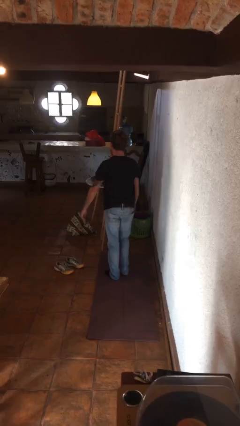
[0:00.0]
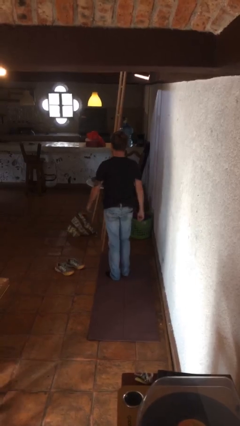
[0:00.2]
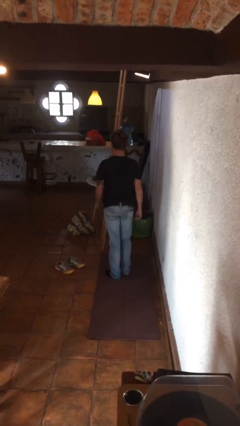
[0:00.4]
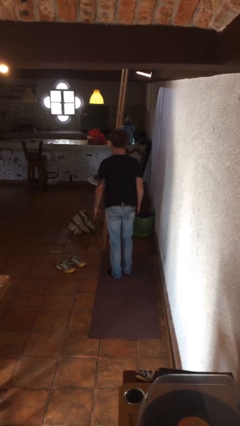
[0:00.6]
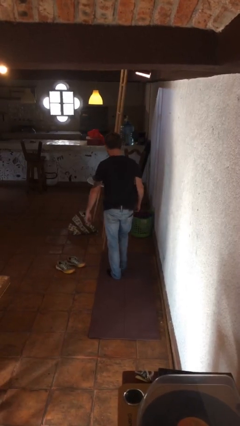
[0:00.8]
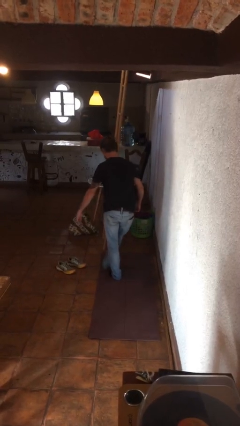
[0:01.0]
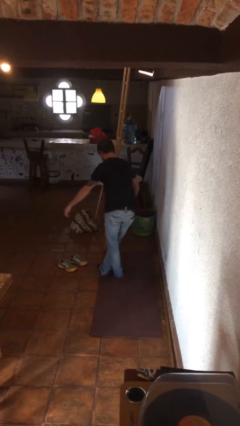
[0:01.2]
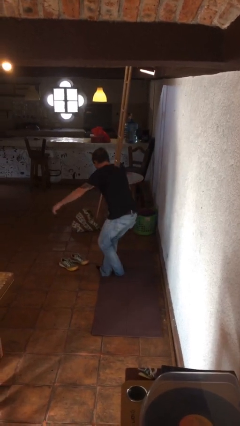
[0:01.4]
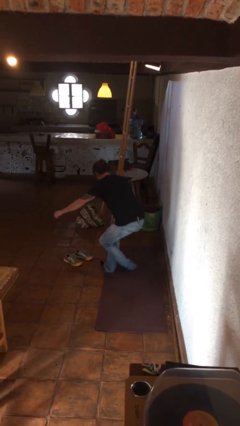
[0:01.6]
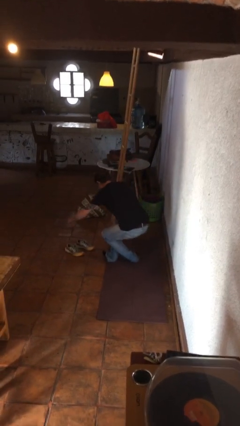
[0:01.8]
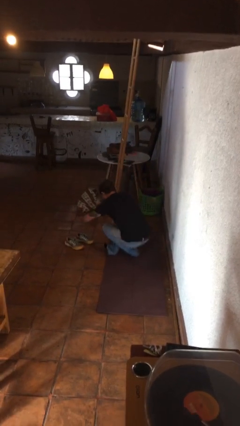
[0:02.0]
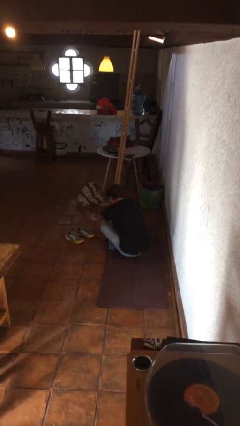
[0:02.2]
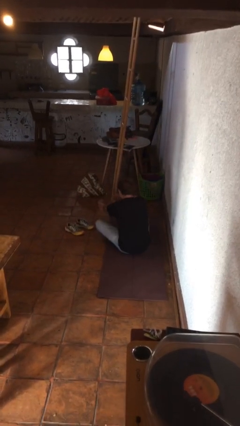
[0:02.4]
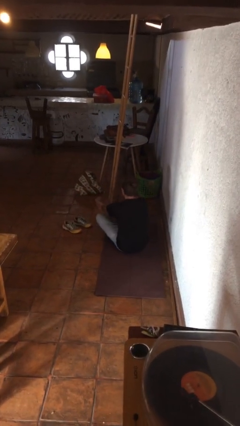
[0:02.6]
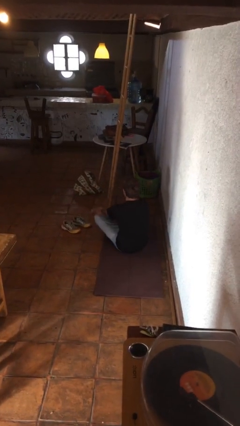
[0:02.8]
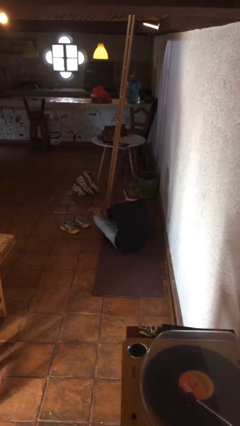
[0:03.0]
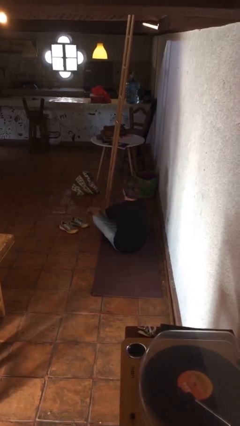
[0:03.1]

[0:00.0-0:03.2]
person sits crisscross

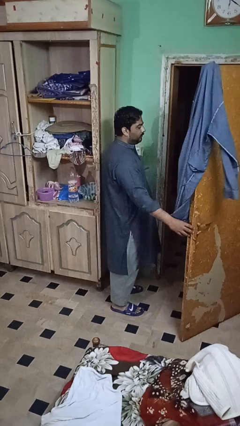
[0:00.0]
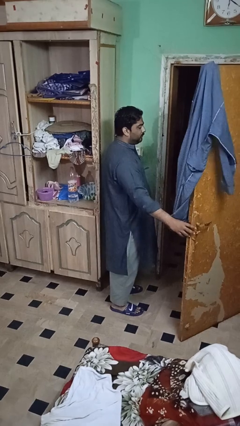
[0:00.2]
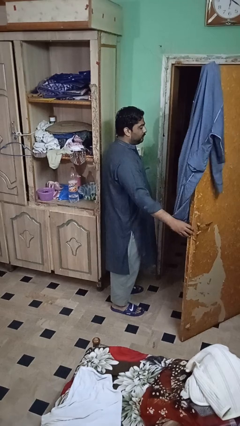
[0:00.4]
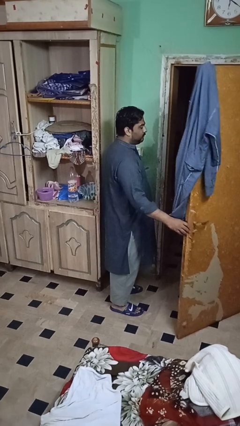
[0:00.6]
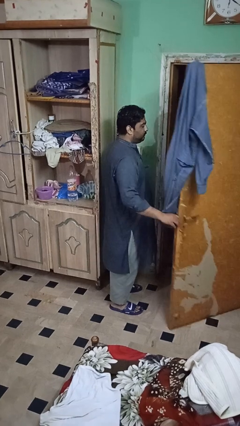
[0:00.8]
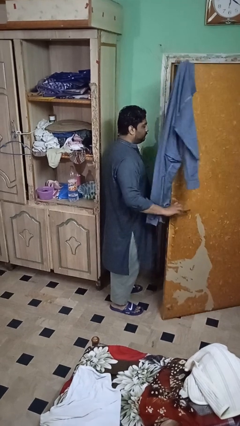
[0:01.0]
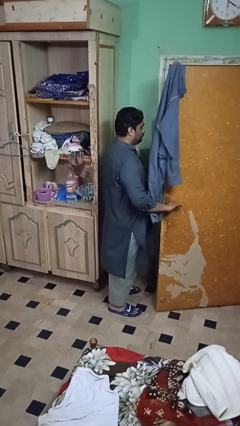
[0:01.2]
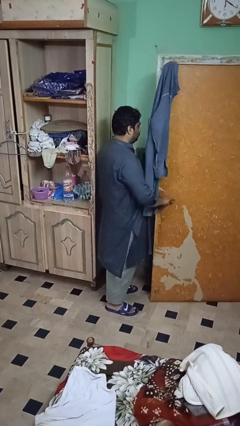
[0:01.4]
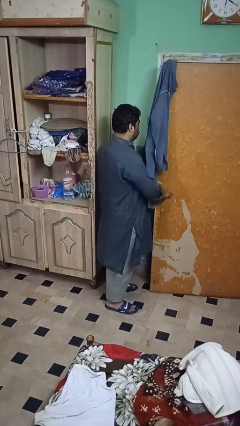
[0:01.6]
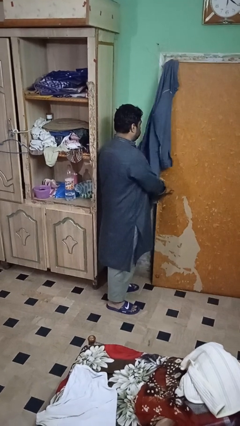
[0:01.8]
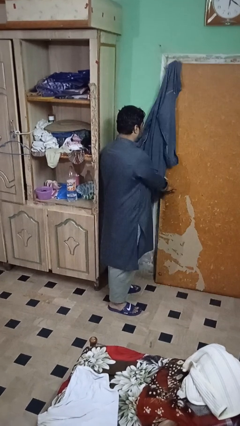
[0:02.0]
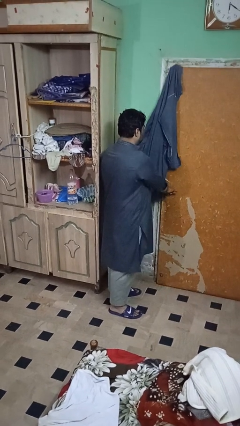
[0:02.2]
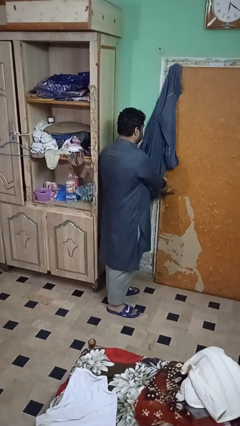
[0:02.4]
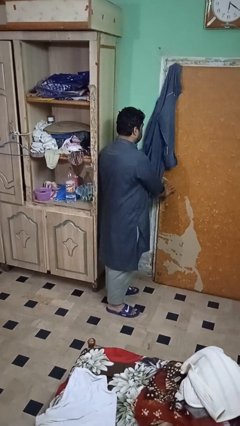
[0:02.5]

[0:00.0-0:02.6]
person closes closet door

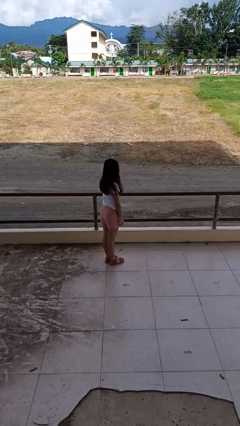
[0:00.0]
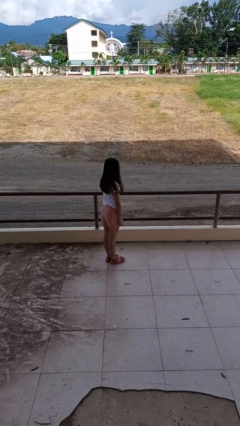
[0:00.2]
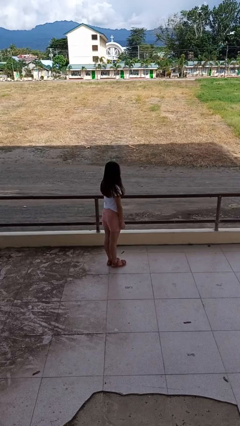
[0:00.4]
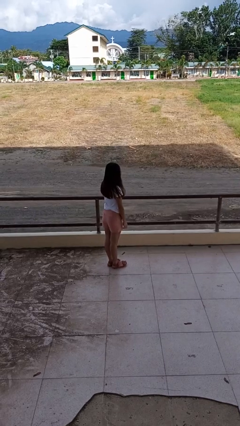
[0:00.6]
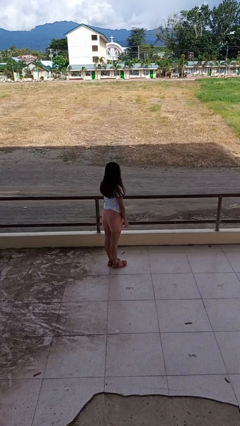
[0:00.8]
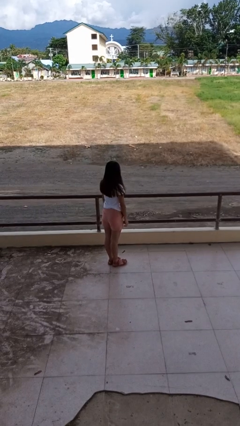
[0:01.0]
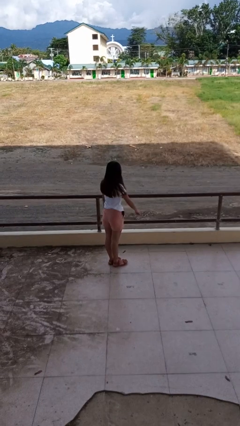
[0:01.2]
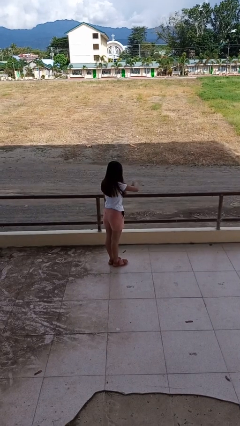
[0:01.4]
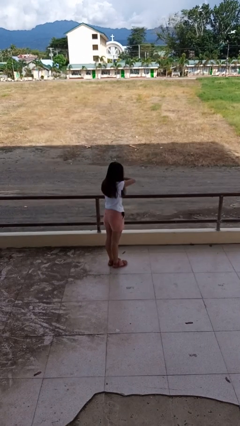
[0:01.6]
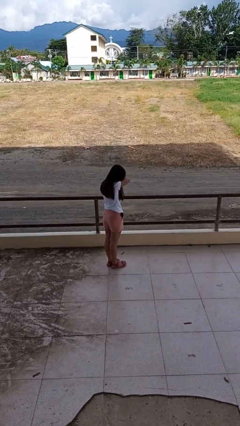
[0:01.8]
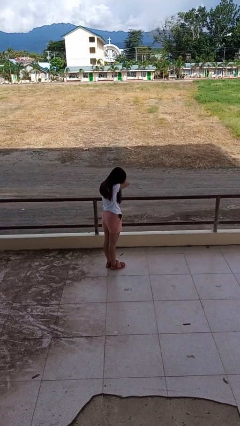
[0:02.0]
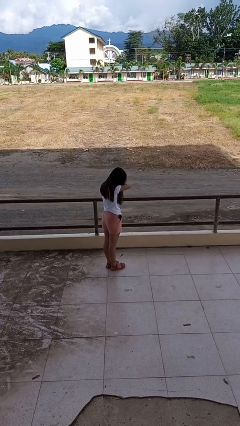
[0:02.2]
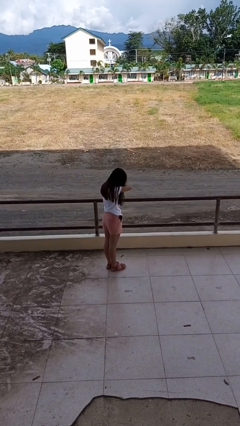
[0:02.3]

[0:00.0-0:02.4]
person sneezes into arm

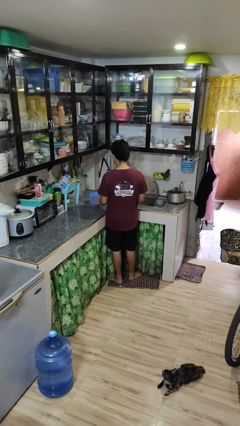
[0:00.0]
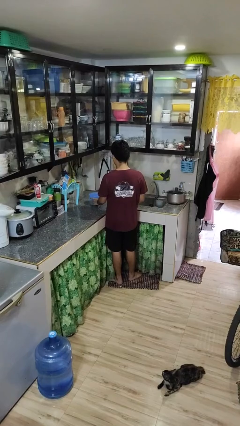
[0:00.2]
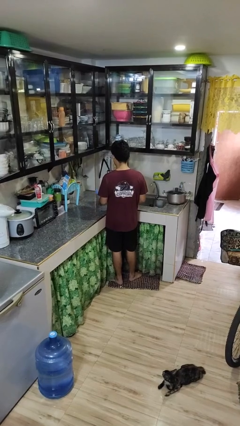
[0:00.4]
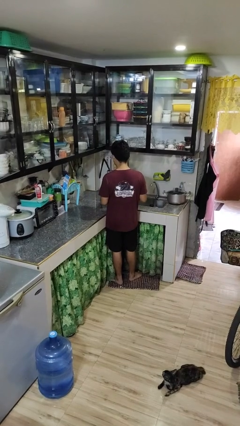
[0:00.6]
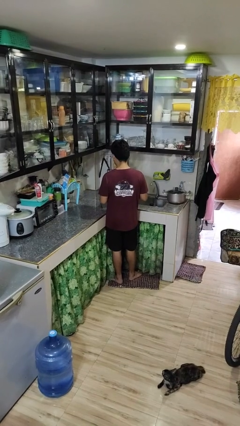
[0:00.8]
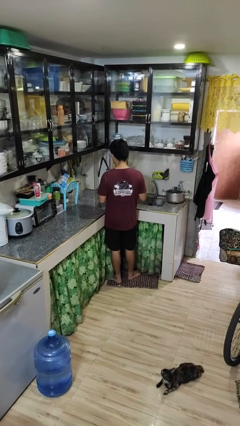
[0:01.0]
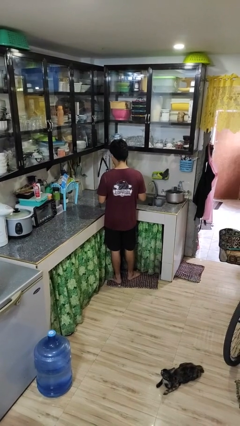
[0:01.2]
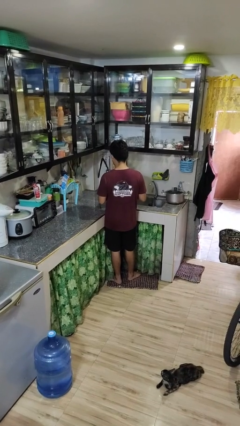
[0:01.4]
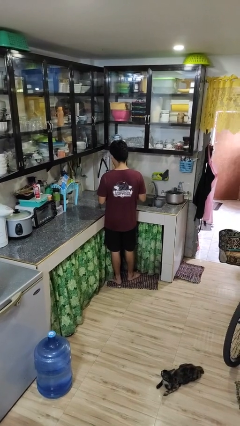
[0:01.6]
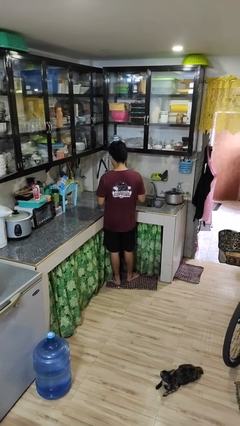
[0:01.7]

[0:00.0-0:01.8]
person picks up object from countertop

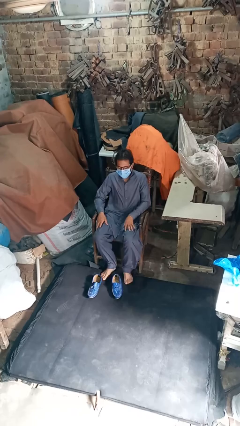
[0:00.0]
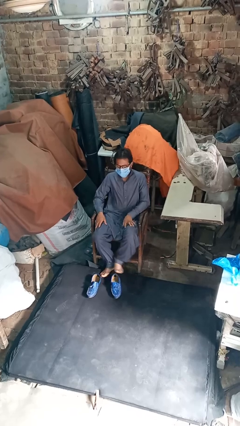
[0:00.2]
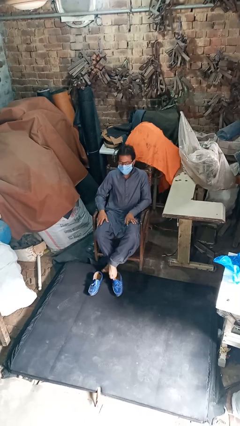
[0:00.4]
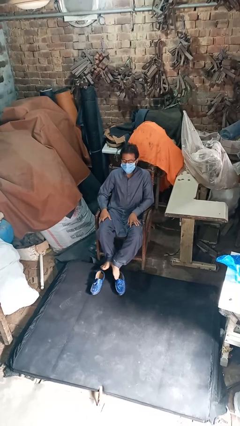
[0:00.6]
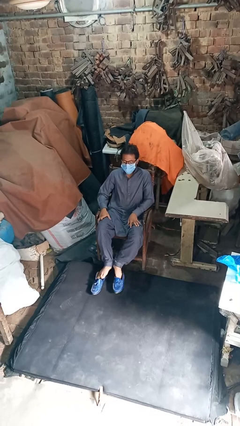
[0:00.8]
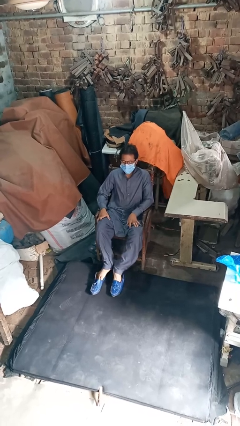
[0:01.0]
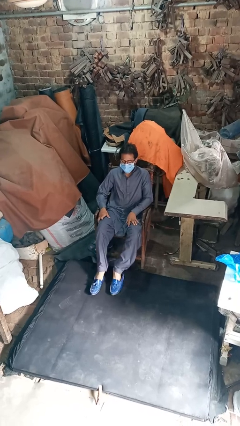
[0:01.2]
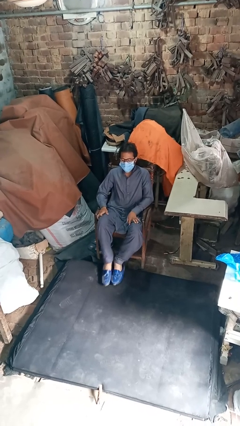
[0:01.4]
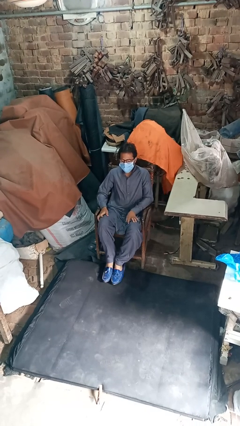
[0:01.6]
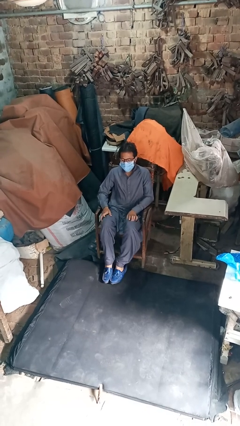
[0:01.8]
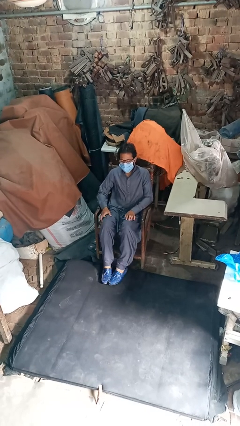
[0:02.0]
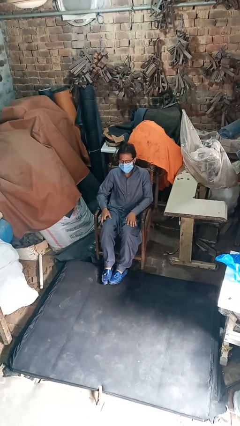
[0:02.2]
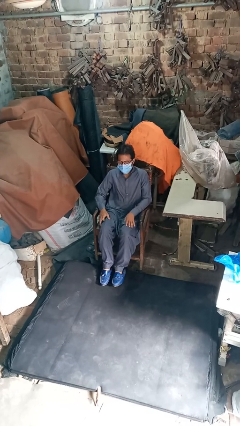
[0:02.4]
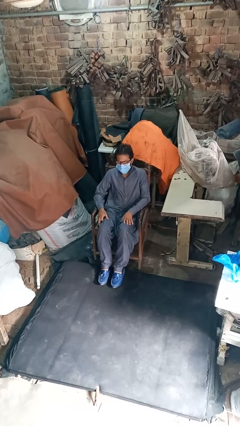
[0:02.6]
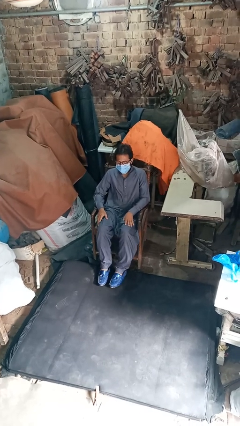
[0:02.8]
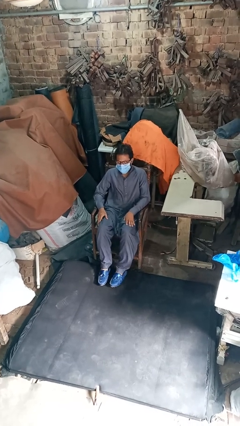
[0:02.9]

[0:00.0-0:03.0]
person puts on shoes

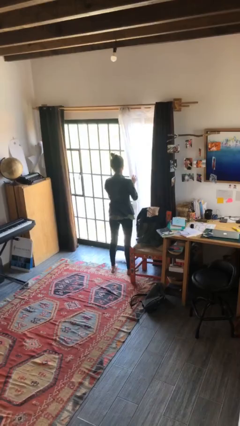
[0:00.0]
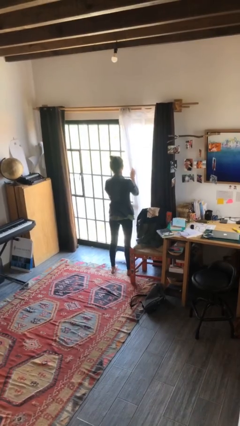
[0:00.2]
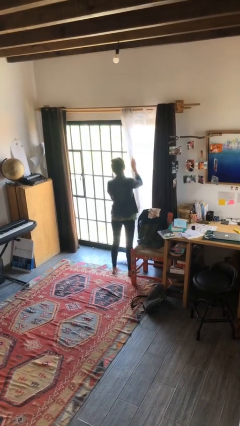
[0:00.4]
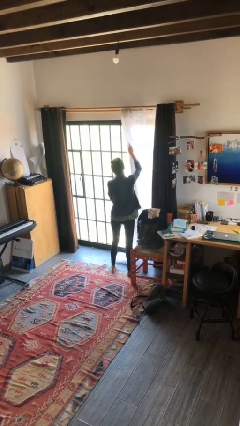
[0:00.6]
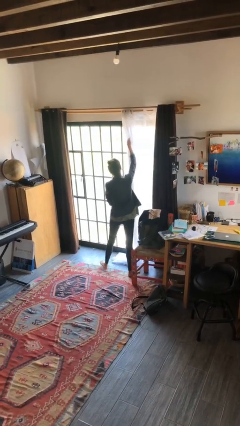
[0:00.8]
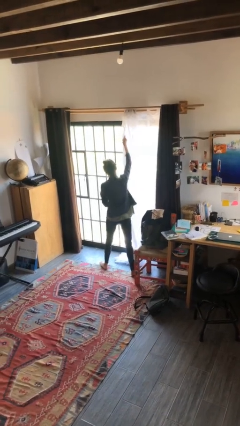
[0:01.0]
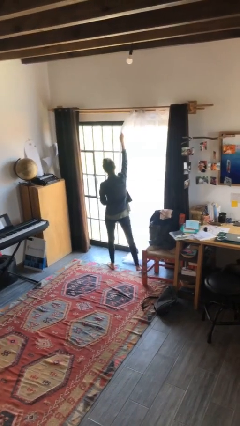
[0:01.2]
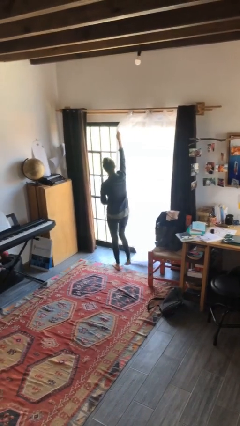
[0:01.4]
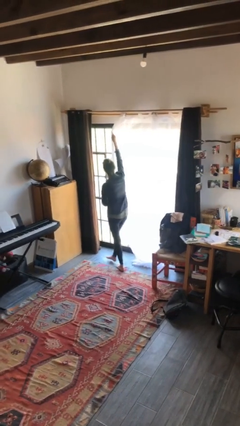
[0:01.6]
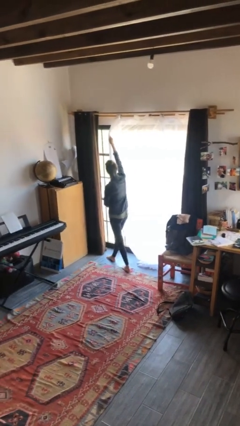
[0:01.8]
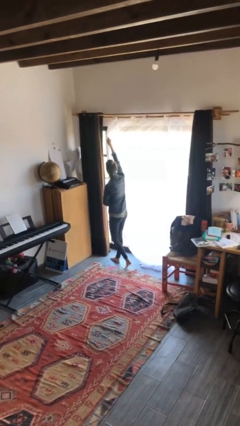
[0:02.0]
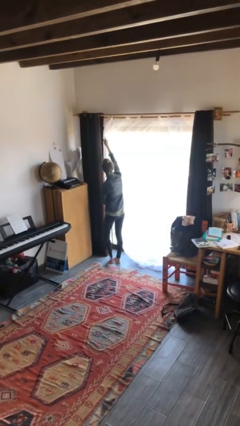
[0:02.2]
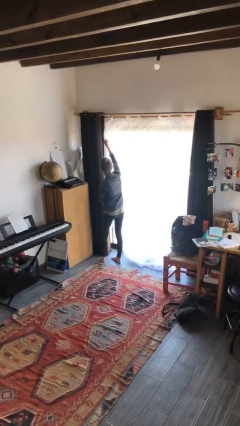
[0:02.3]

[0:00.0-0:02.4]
person closes curtains

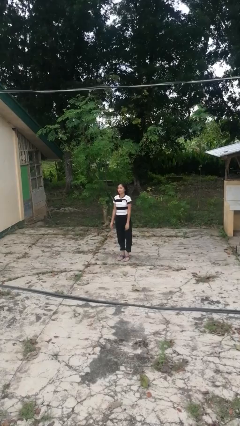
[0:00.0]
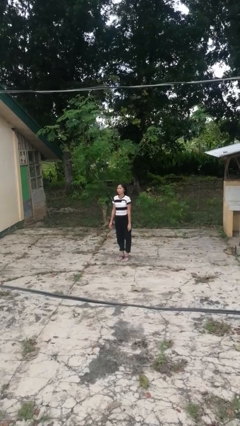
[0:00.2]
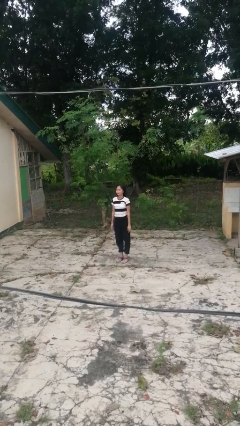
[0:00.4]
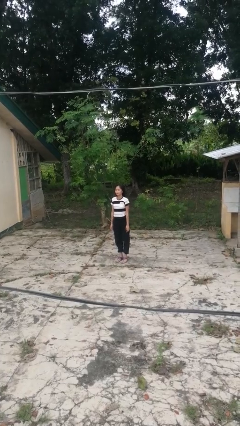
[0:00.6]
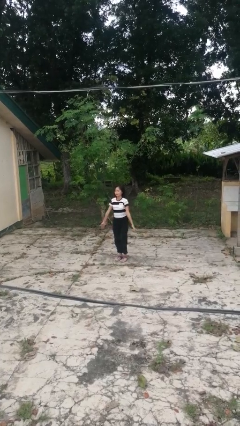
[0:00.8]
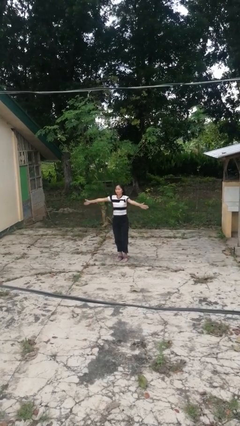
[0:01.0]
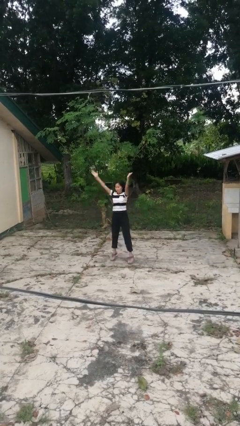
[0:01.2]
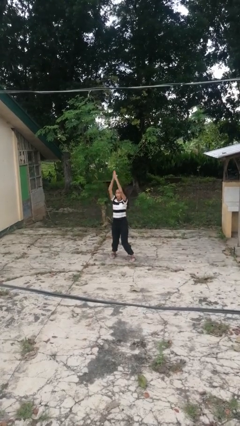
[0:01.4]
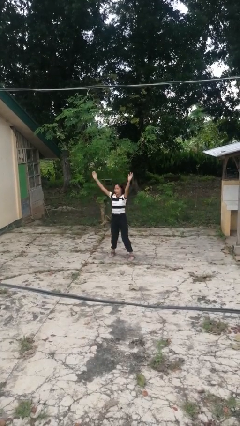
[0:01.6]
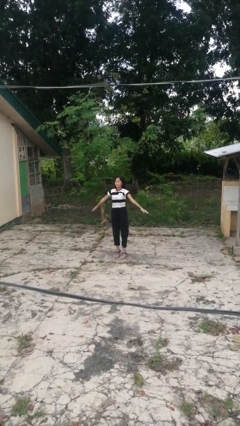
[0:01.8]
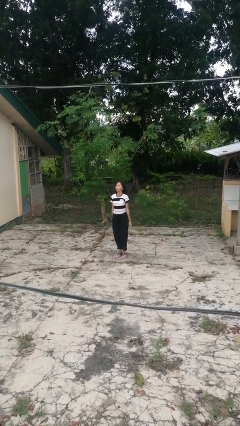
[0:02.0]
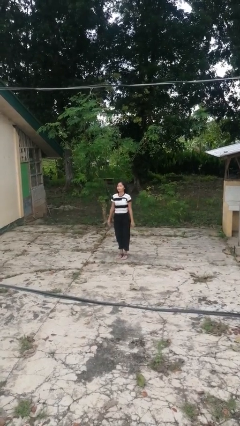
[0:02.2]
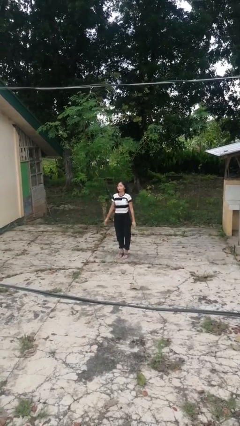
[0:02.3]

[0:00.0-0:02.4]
person exercises with jumping jacks
